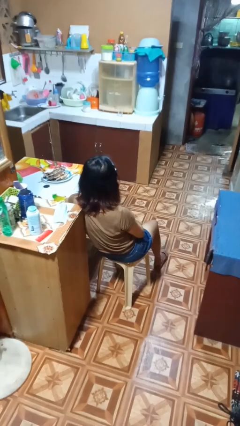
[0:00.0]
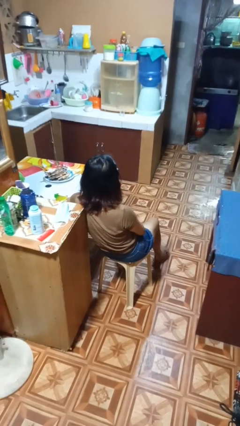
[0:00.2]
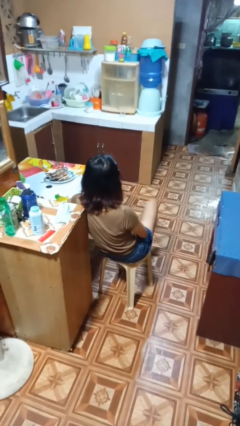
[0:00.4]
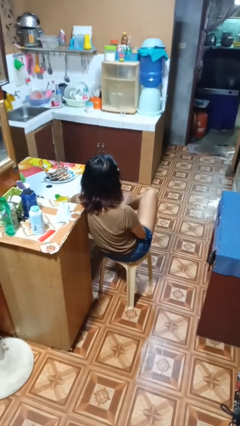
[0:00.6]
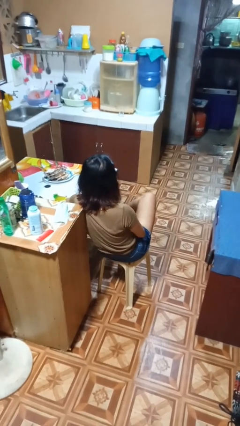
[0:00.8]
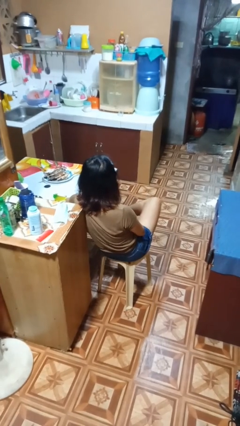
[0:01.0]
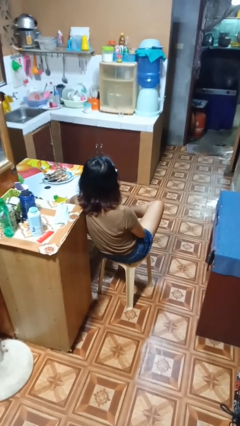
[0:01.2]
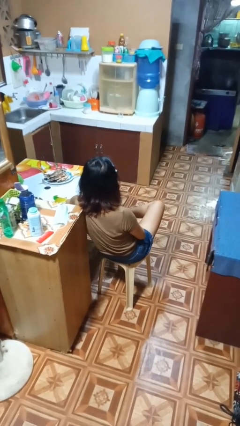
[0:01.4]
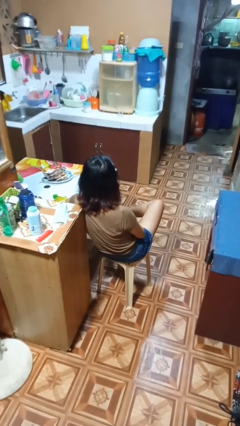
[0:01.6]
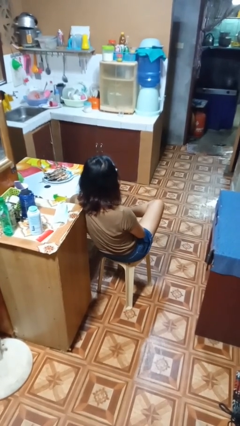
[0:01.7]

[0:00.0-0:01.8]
person crosses legs

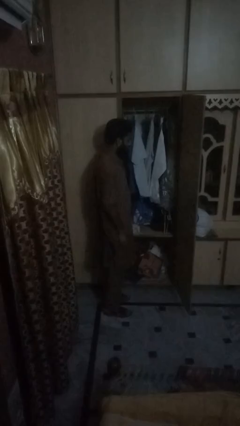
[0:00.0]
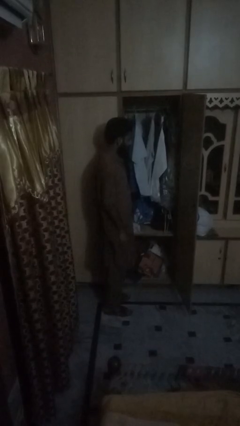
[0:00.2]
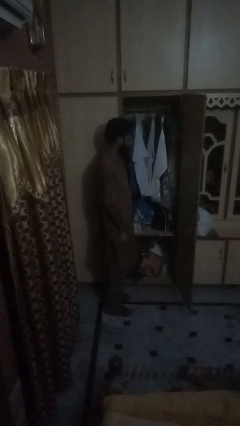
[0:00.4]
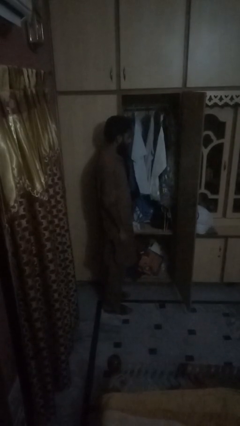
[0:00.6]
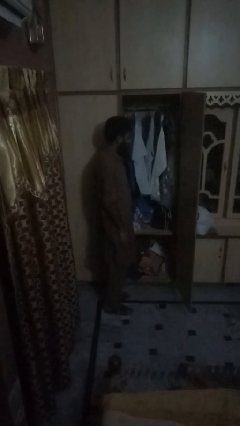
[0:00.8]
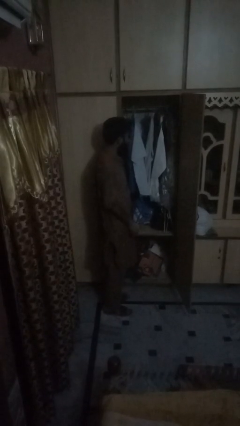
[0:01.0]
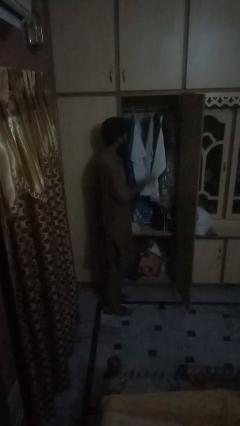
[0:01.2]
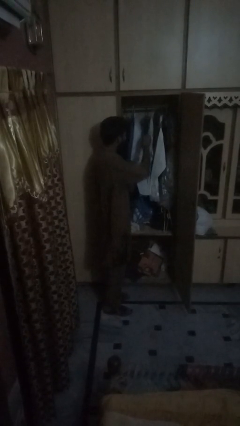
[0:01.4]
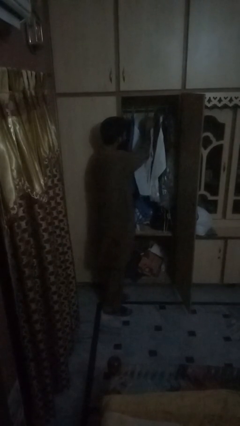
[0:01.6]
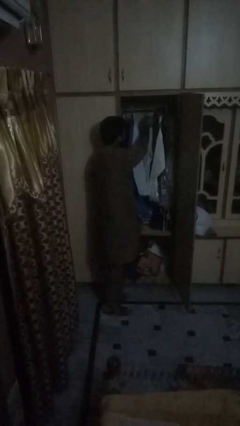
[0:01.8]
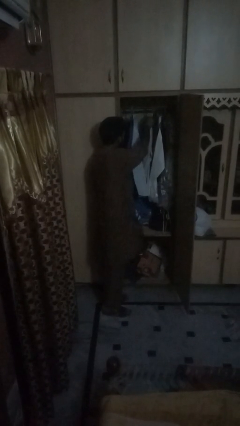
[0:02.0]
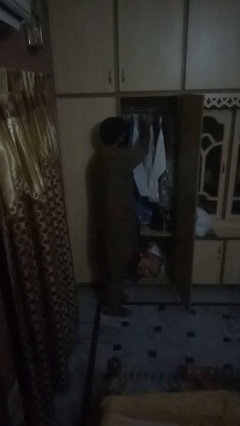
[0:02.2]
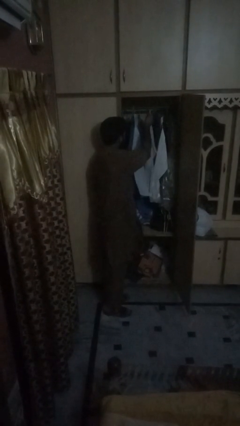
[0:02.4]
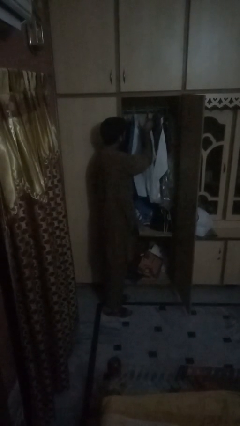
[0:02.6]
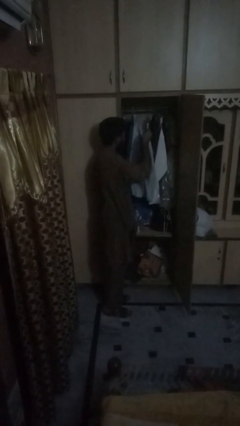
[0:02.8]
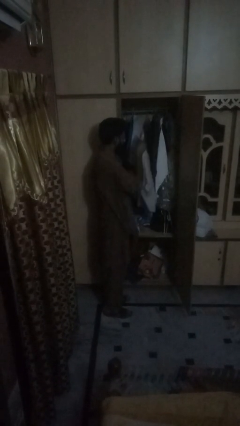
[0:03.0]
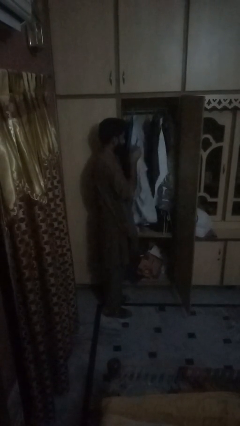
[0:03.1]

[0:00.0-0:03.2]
person puts clothes into dresser

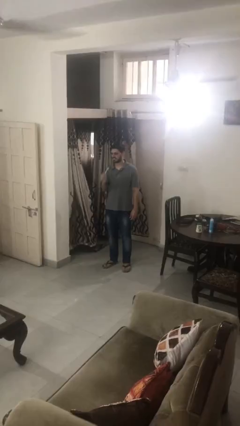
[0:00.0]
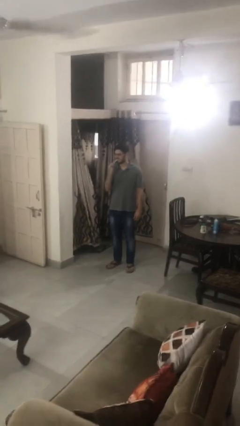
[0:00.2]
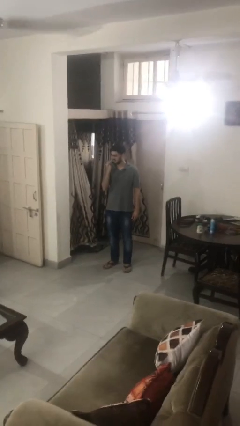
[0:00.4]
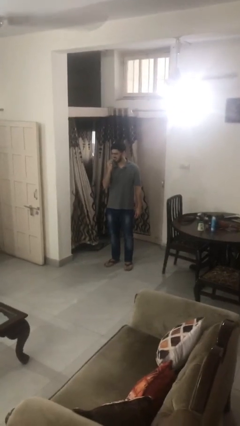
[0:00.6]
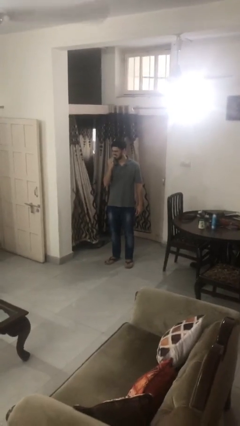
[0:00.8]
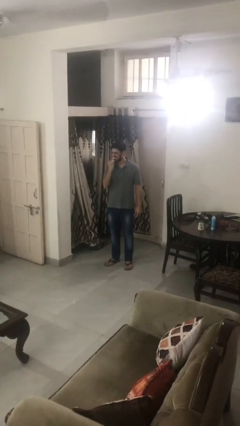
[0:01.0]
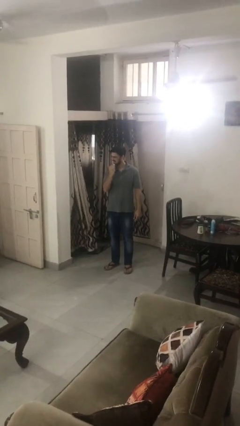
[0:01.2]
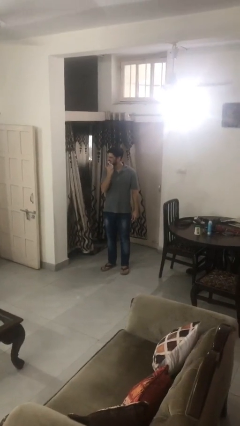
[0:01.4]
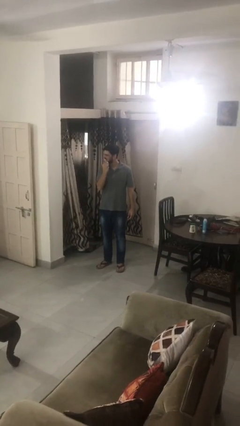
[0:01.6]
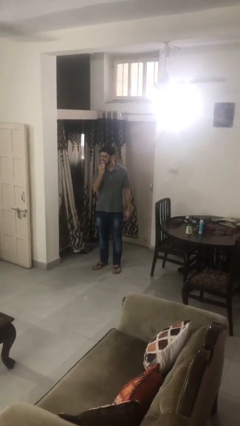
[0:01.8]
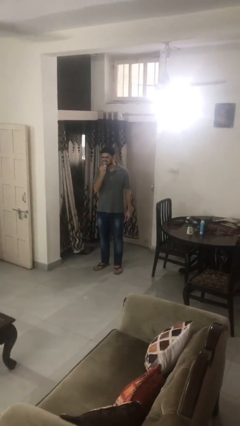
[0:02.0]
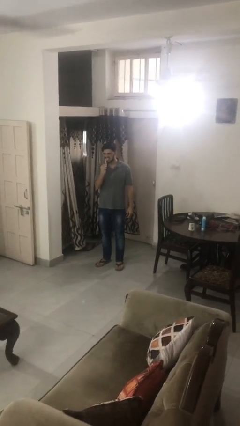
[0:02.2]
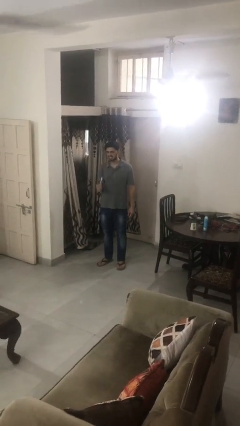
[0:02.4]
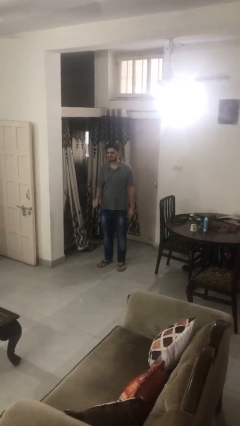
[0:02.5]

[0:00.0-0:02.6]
person brushes teeth

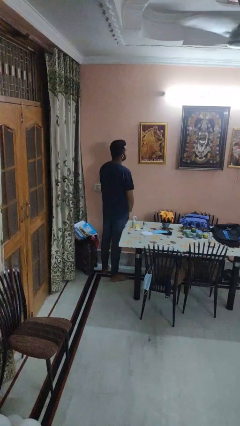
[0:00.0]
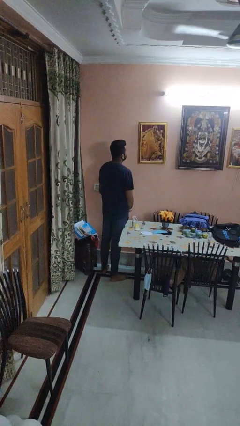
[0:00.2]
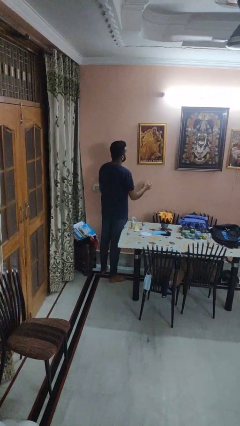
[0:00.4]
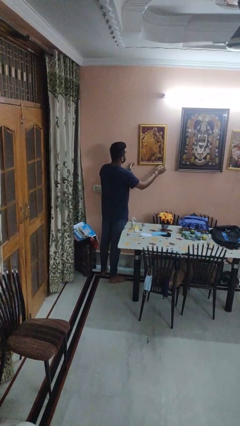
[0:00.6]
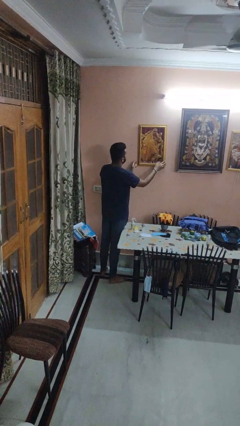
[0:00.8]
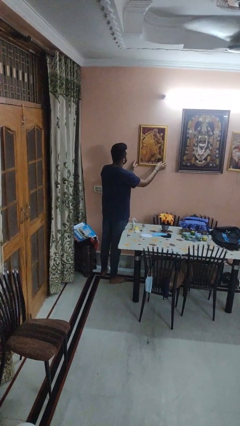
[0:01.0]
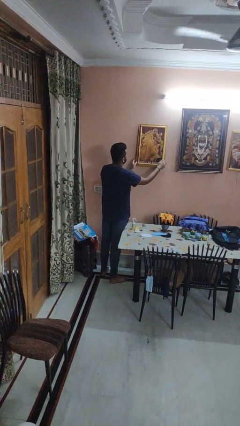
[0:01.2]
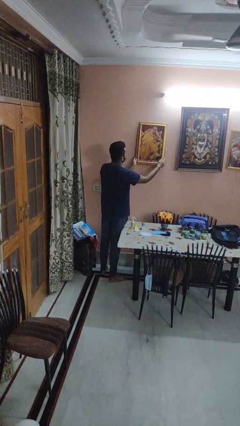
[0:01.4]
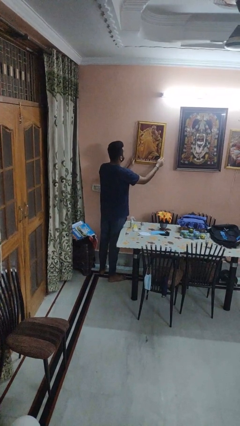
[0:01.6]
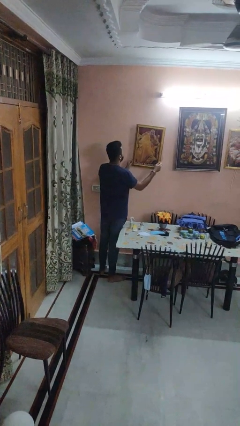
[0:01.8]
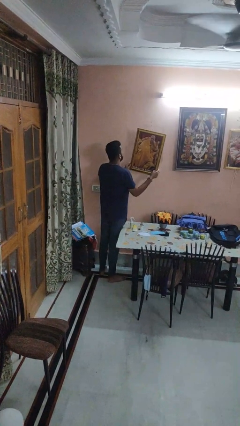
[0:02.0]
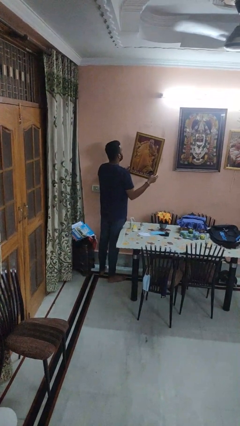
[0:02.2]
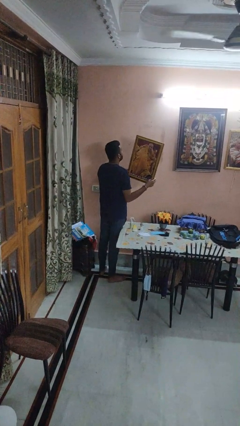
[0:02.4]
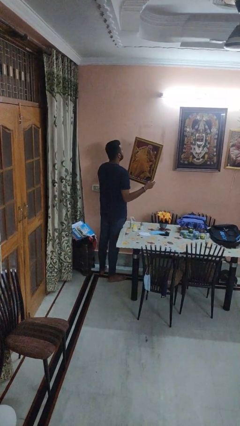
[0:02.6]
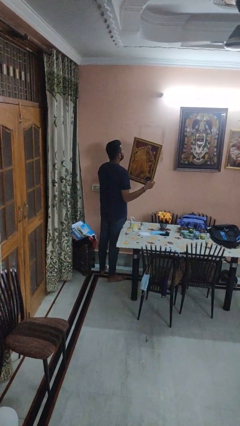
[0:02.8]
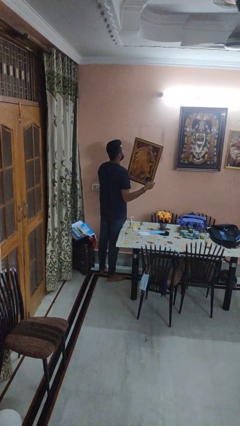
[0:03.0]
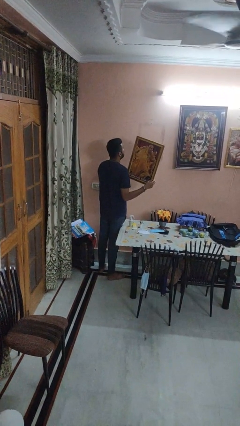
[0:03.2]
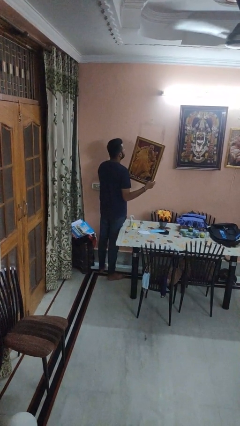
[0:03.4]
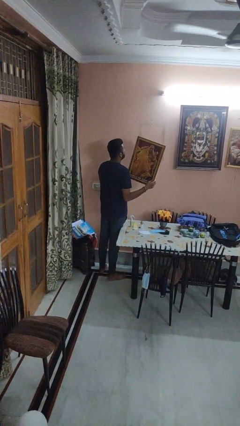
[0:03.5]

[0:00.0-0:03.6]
person takes down picture frame

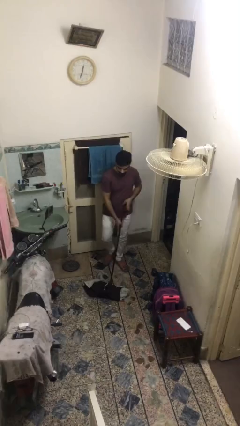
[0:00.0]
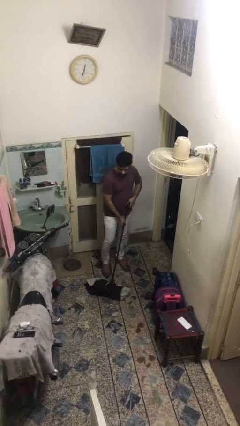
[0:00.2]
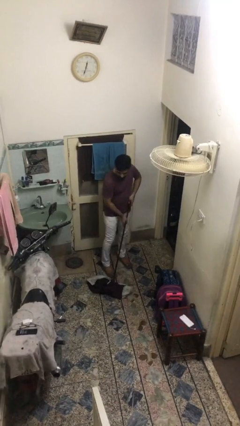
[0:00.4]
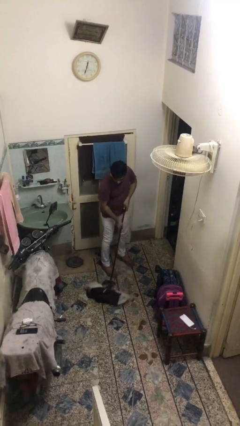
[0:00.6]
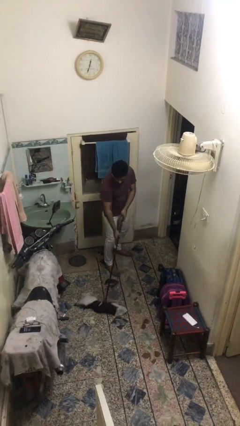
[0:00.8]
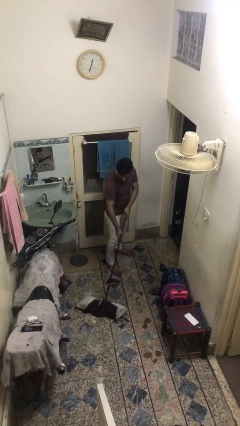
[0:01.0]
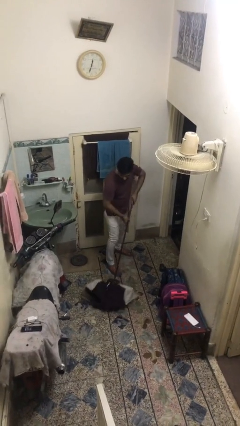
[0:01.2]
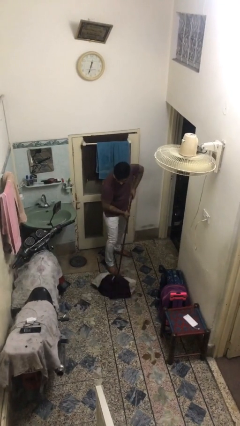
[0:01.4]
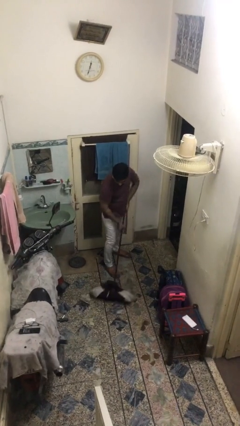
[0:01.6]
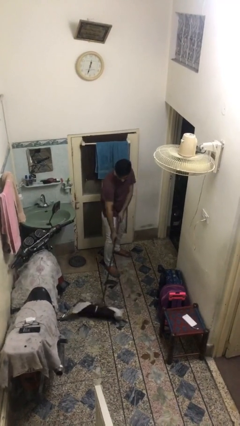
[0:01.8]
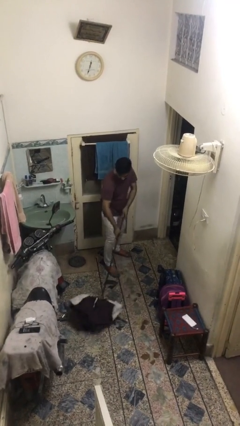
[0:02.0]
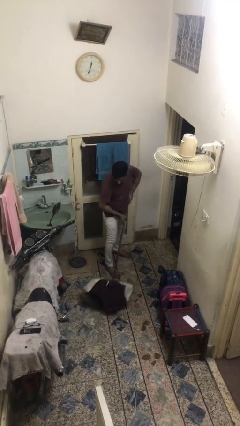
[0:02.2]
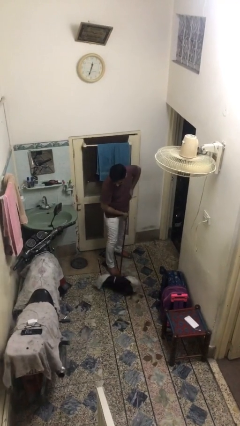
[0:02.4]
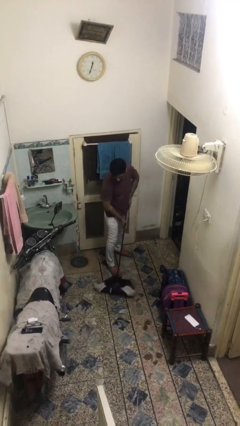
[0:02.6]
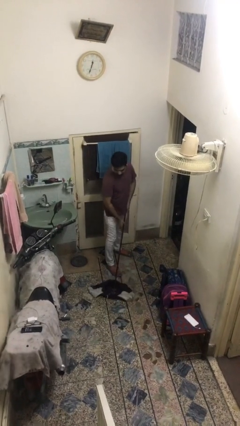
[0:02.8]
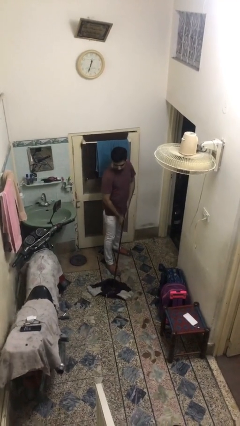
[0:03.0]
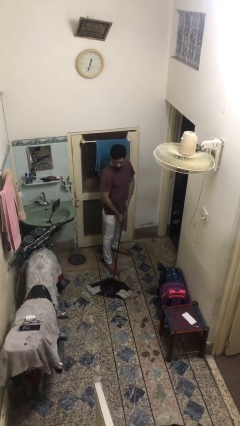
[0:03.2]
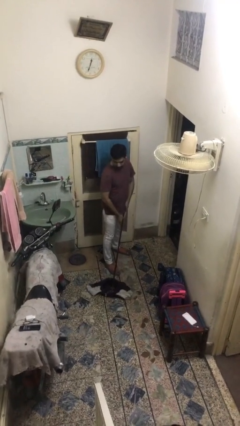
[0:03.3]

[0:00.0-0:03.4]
person sweeps floor

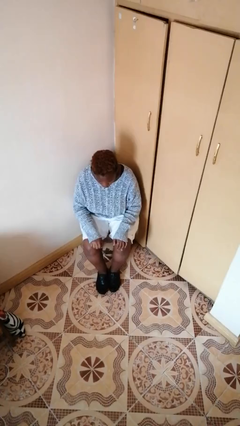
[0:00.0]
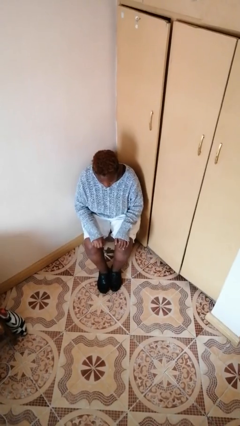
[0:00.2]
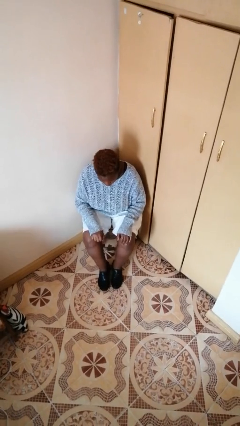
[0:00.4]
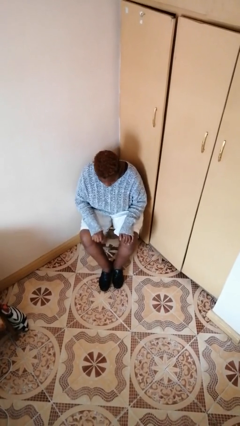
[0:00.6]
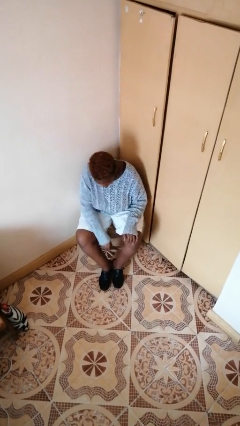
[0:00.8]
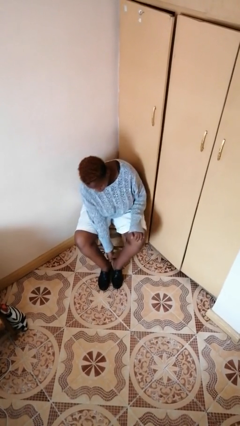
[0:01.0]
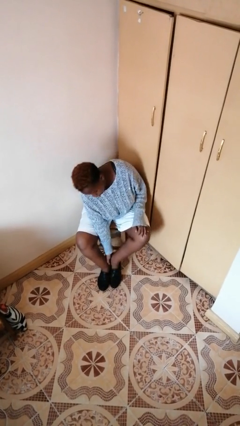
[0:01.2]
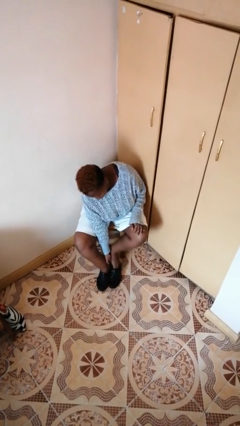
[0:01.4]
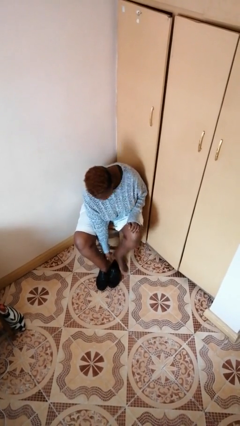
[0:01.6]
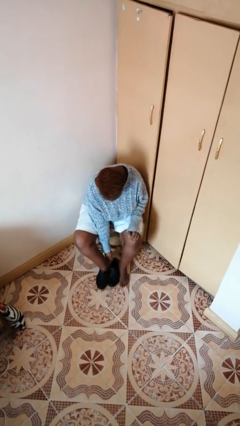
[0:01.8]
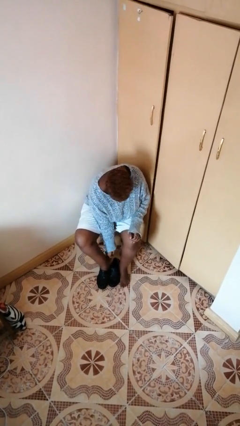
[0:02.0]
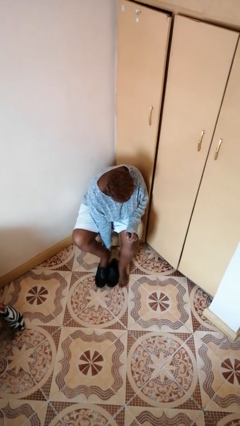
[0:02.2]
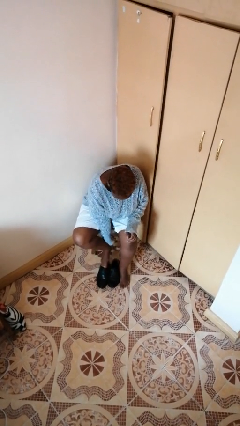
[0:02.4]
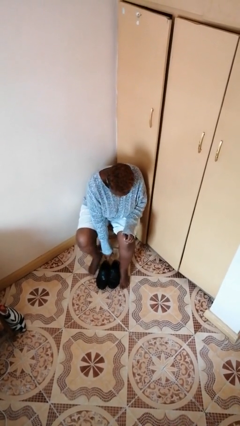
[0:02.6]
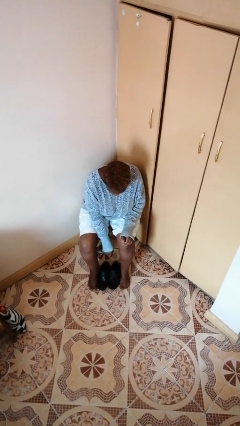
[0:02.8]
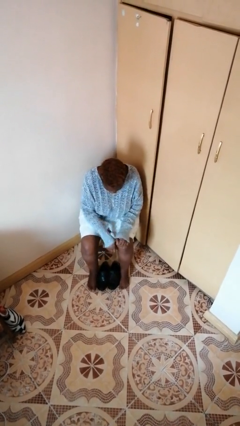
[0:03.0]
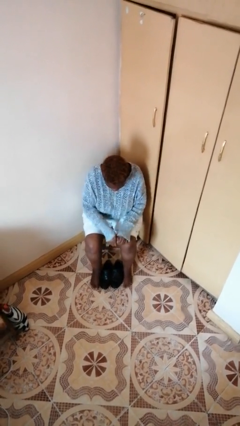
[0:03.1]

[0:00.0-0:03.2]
person takes off shoes
